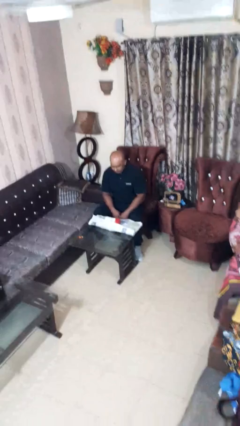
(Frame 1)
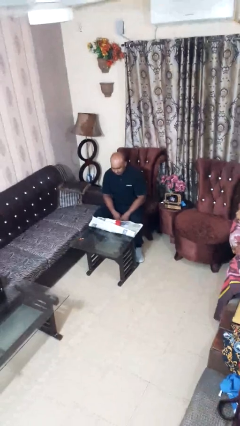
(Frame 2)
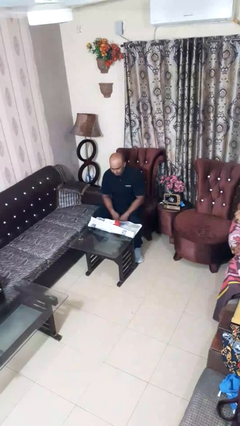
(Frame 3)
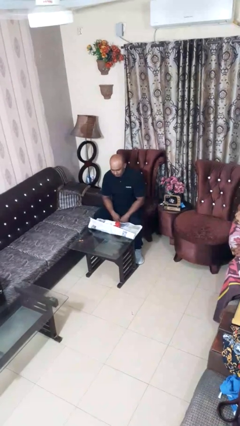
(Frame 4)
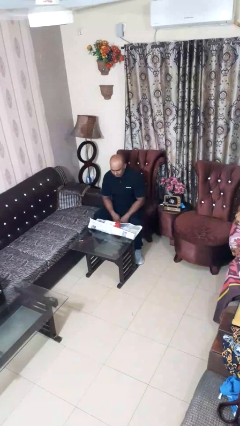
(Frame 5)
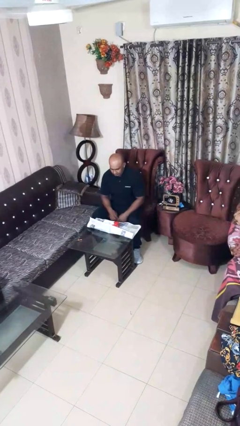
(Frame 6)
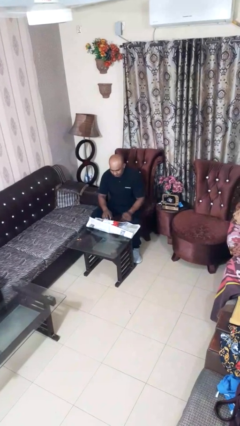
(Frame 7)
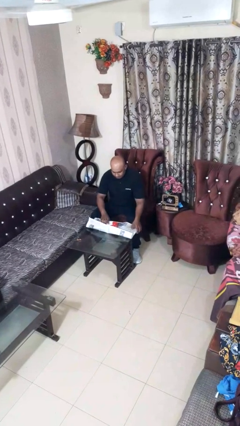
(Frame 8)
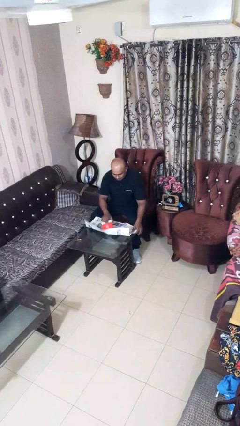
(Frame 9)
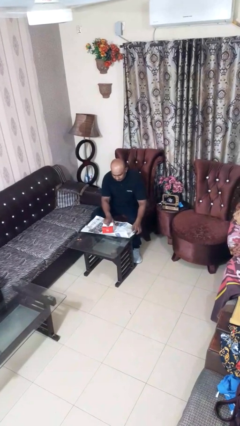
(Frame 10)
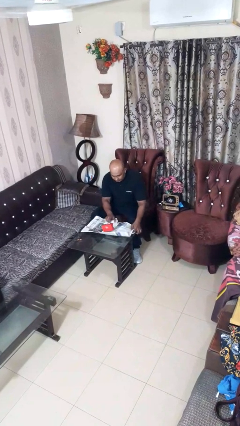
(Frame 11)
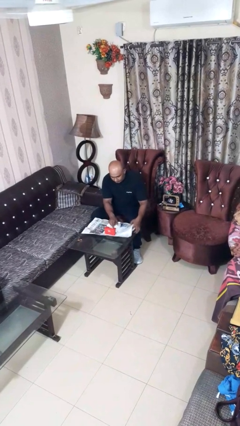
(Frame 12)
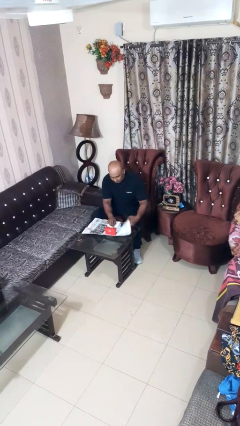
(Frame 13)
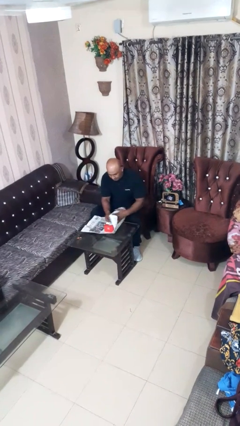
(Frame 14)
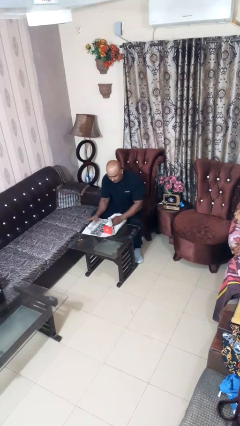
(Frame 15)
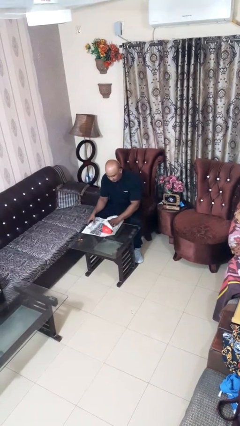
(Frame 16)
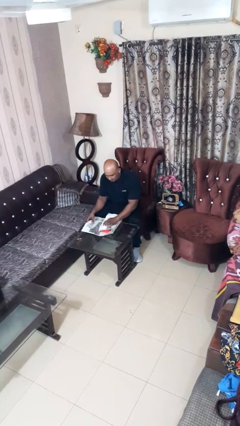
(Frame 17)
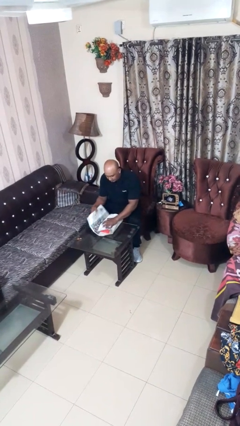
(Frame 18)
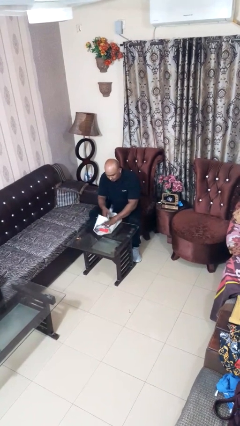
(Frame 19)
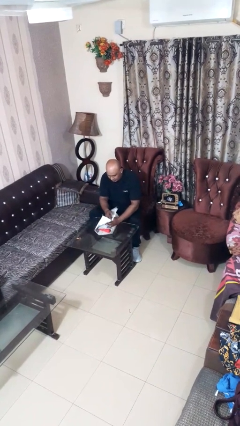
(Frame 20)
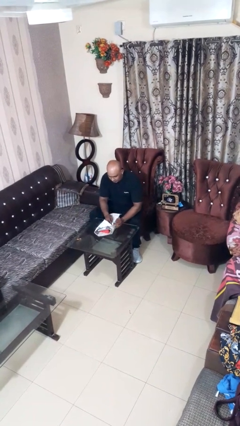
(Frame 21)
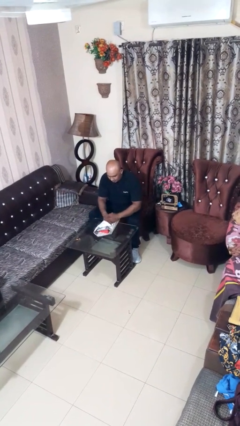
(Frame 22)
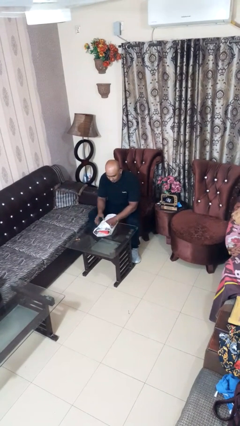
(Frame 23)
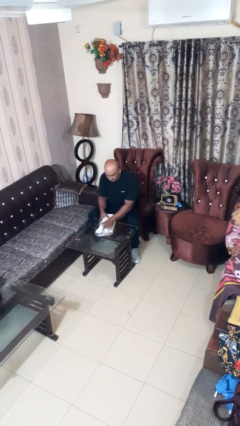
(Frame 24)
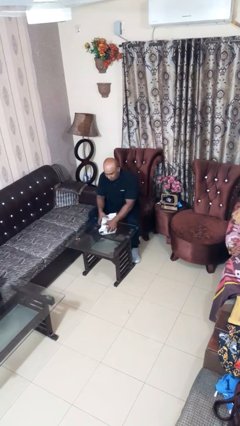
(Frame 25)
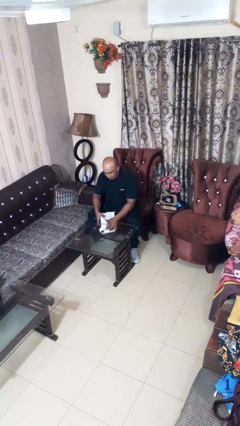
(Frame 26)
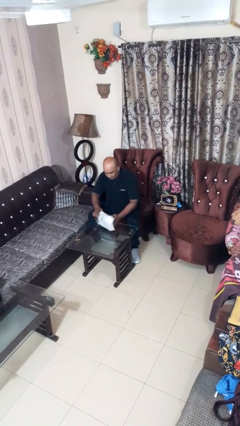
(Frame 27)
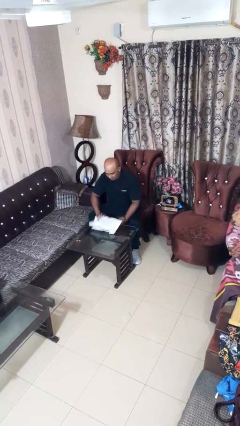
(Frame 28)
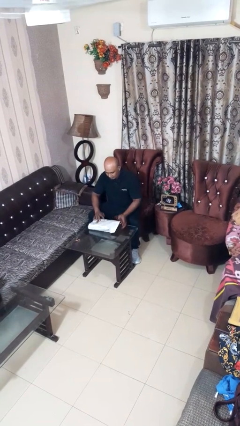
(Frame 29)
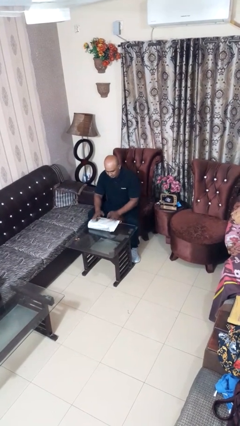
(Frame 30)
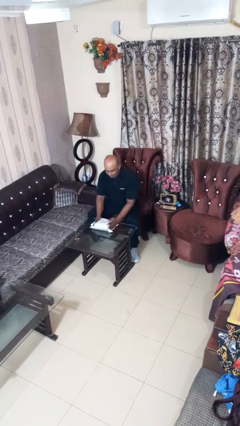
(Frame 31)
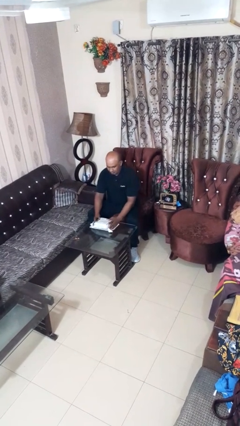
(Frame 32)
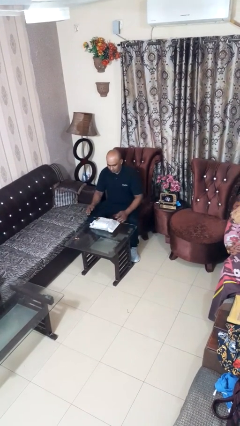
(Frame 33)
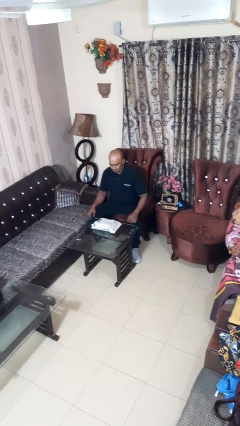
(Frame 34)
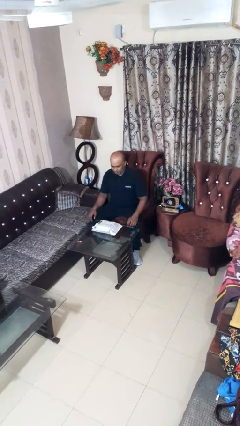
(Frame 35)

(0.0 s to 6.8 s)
person wraps box

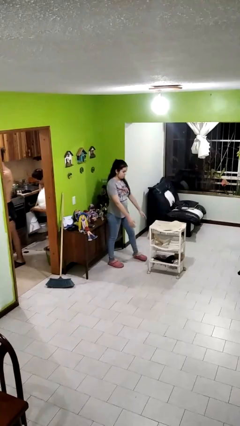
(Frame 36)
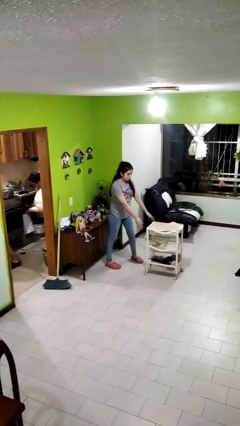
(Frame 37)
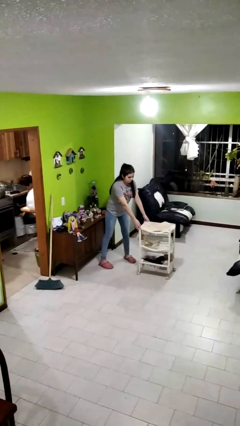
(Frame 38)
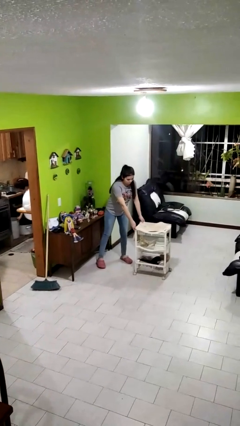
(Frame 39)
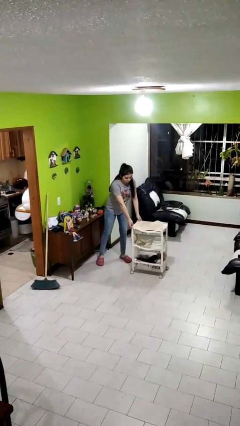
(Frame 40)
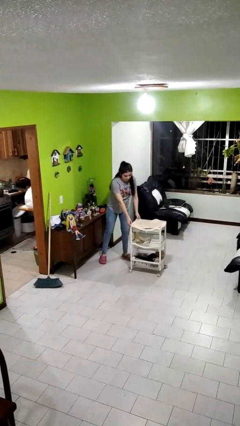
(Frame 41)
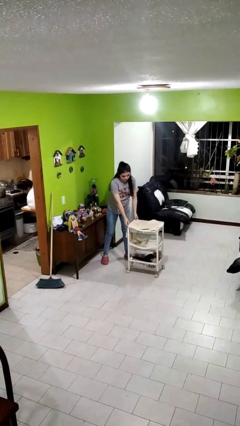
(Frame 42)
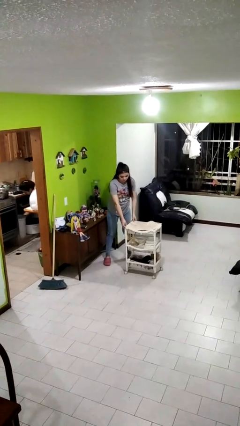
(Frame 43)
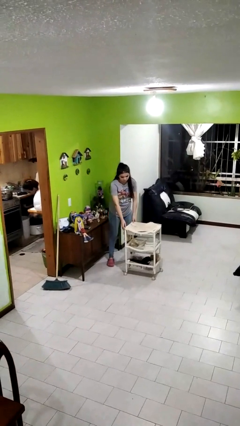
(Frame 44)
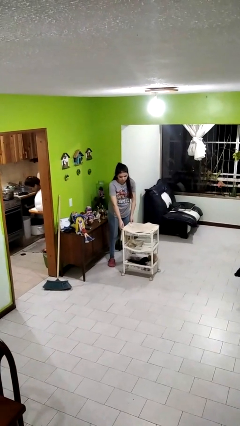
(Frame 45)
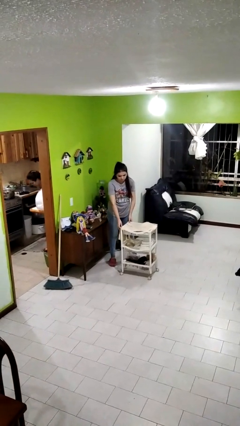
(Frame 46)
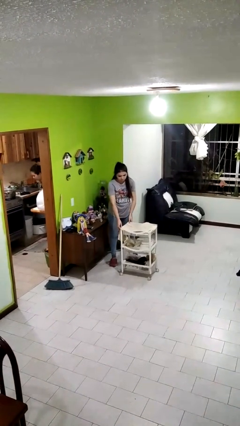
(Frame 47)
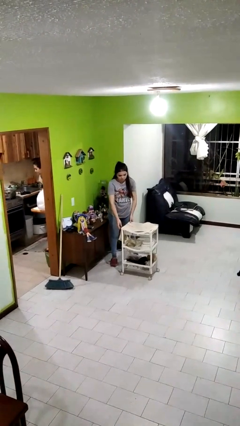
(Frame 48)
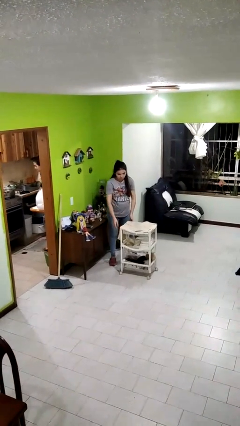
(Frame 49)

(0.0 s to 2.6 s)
person pulls wheeled cart

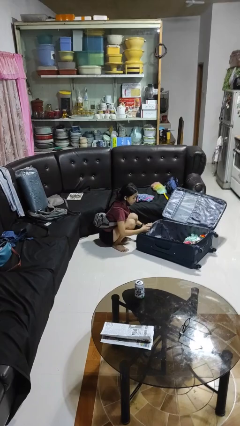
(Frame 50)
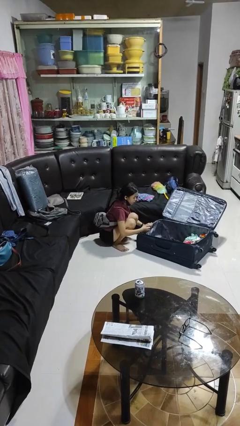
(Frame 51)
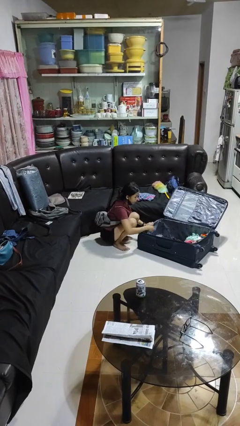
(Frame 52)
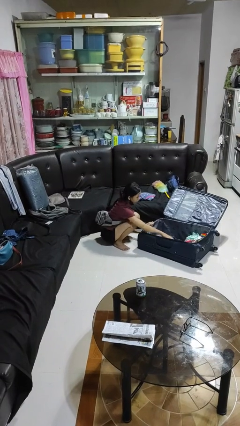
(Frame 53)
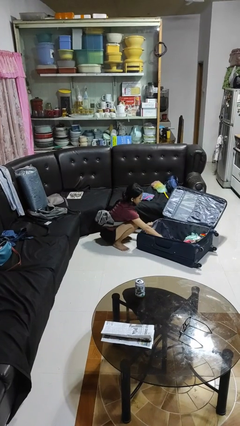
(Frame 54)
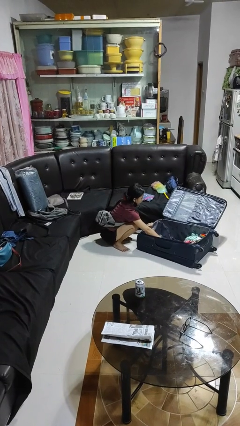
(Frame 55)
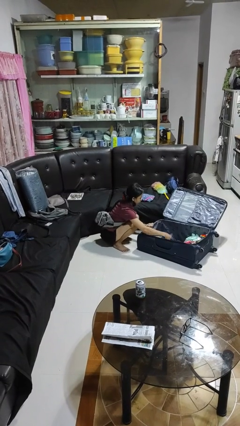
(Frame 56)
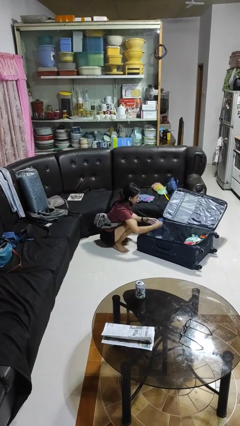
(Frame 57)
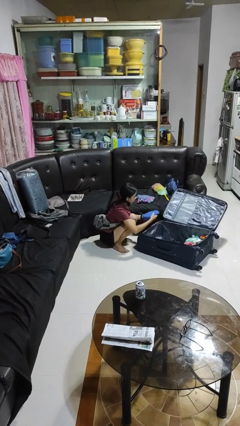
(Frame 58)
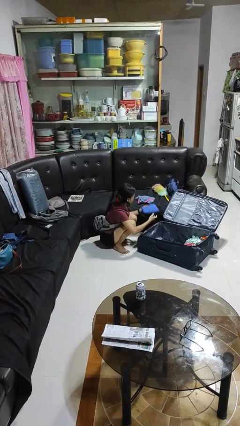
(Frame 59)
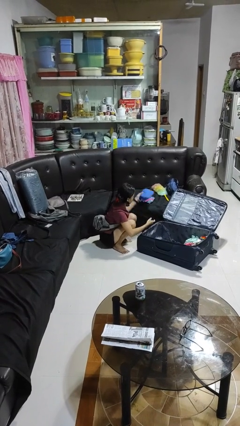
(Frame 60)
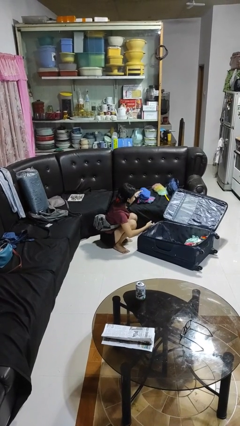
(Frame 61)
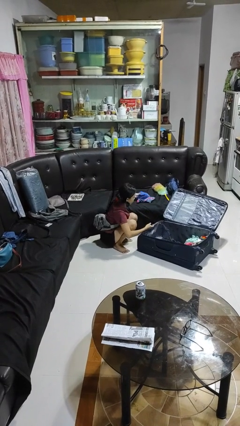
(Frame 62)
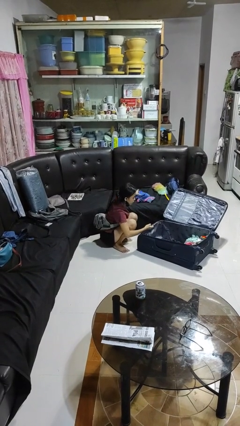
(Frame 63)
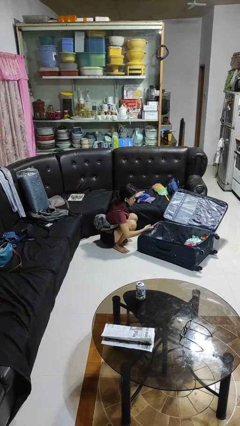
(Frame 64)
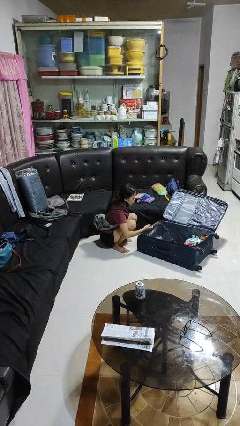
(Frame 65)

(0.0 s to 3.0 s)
person unloads clothes from suitcase

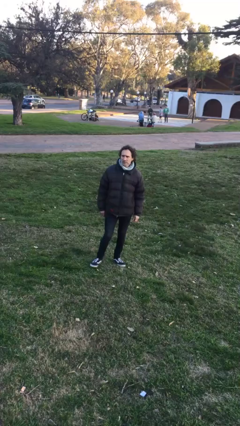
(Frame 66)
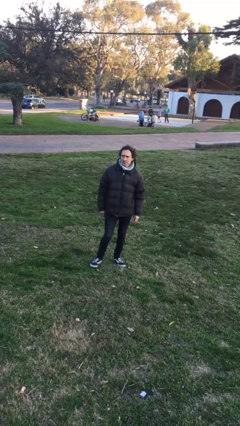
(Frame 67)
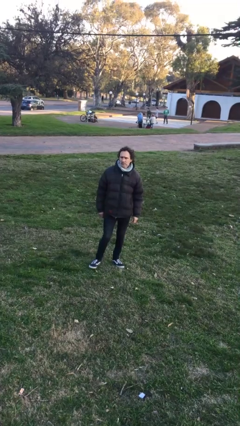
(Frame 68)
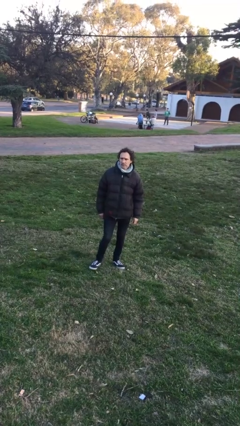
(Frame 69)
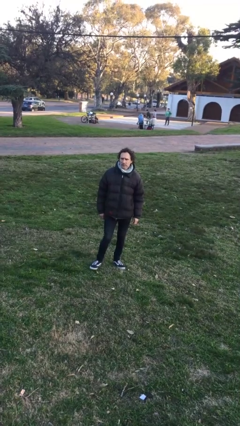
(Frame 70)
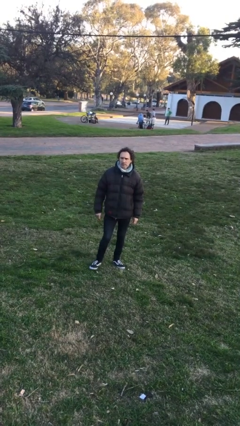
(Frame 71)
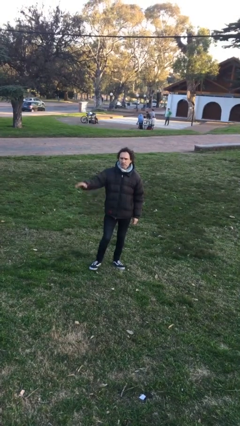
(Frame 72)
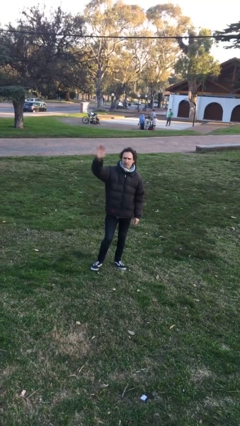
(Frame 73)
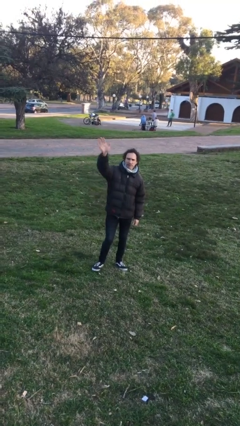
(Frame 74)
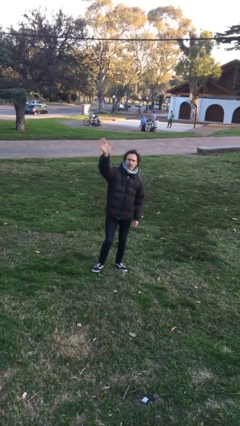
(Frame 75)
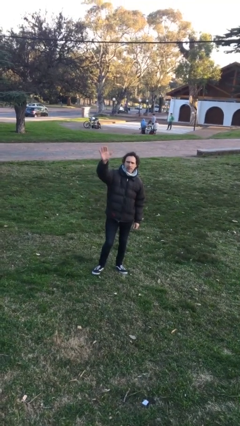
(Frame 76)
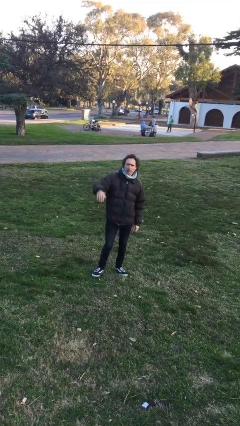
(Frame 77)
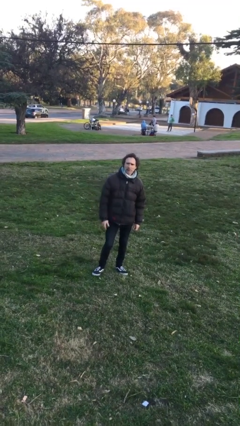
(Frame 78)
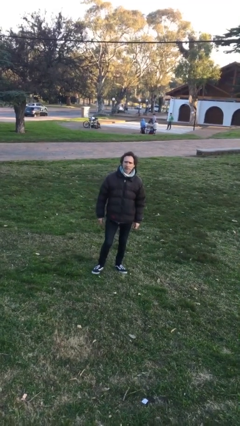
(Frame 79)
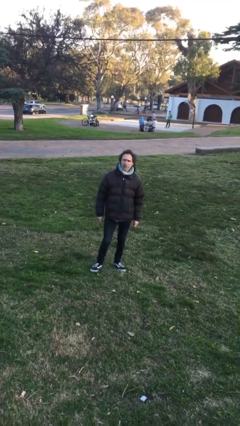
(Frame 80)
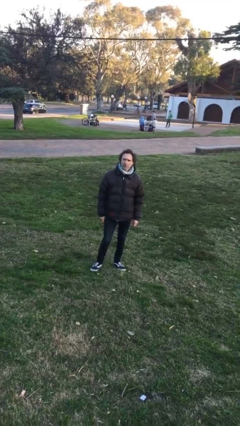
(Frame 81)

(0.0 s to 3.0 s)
person waves at person

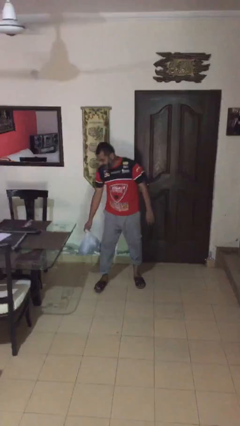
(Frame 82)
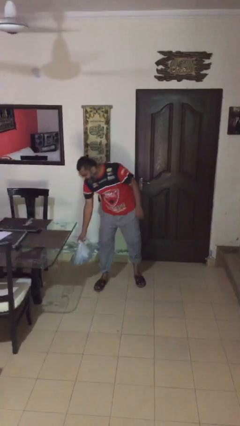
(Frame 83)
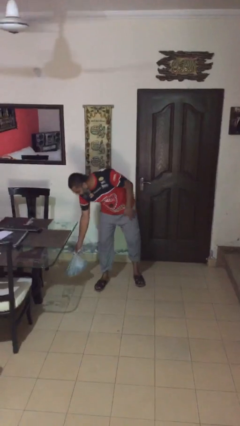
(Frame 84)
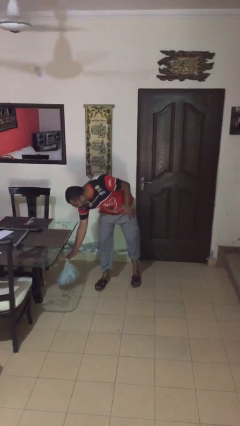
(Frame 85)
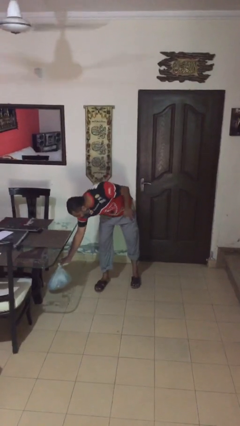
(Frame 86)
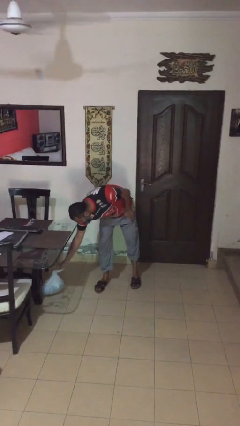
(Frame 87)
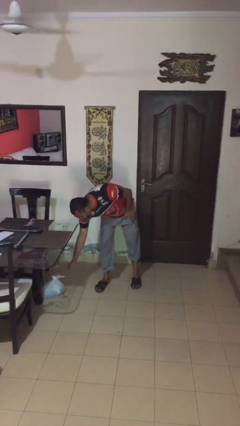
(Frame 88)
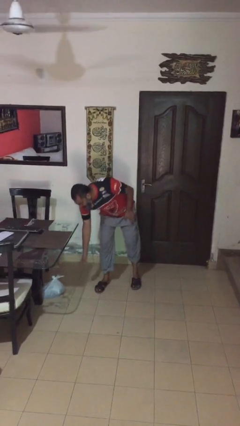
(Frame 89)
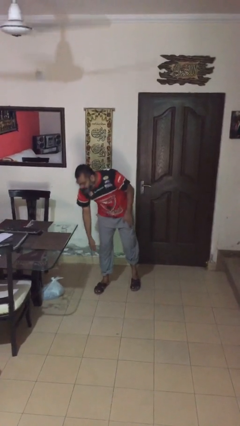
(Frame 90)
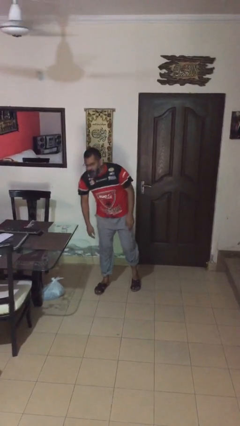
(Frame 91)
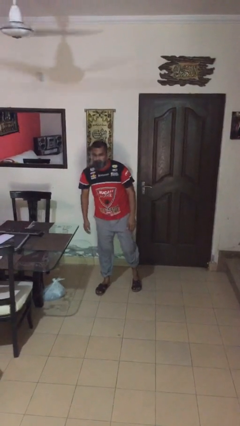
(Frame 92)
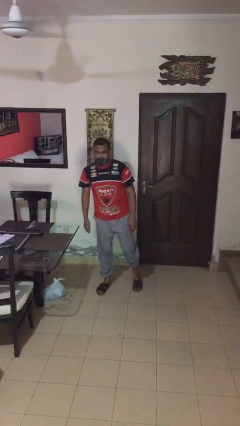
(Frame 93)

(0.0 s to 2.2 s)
person puts down object on table
